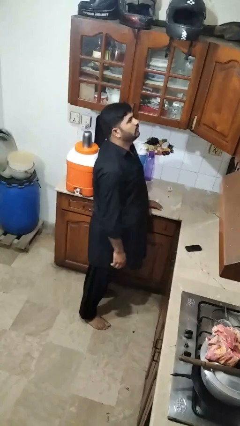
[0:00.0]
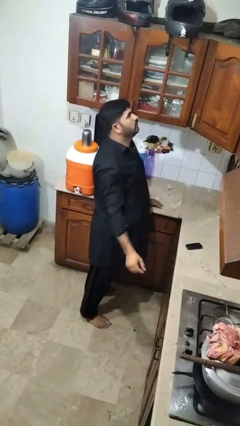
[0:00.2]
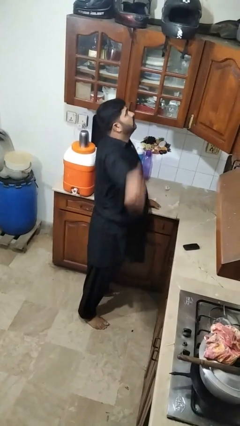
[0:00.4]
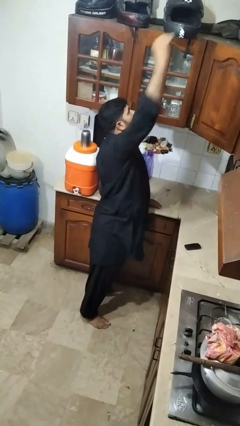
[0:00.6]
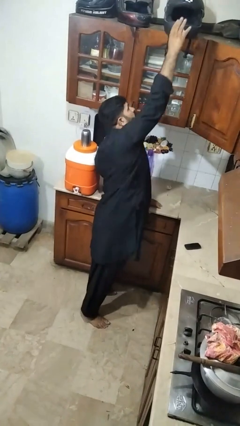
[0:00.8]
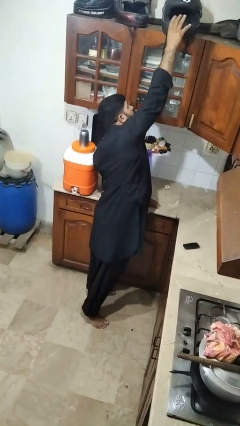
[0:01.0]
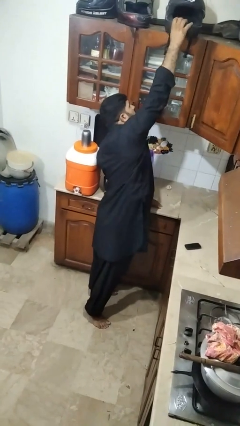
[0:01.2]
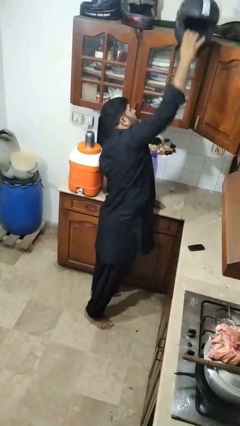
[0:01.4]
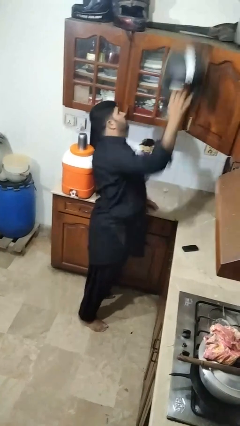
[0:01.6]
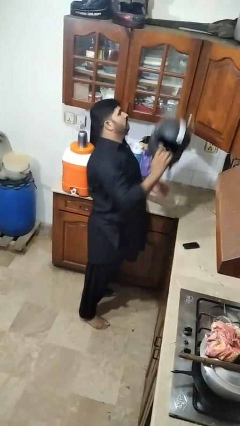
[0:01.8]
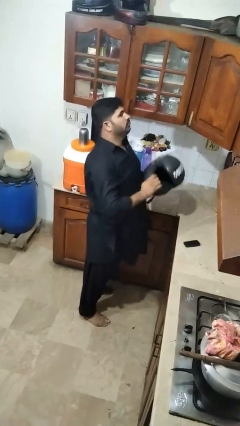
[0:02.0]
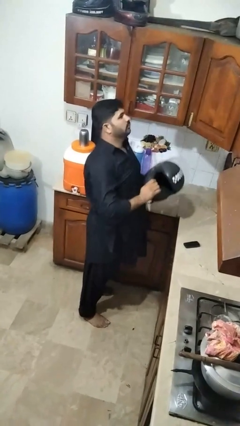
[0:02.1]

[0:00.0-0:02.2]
person picks up object from shelf

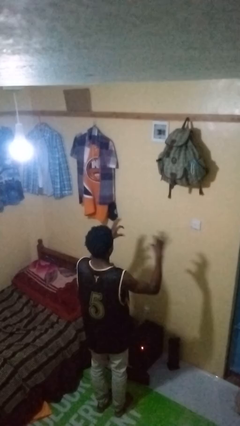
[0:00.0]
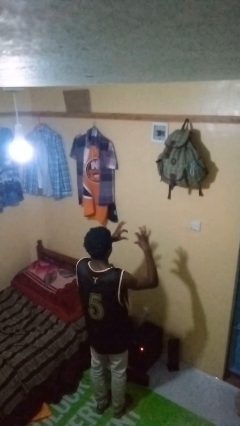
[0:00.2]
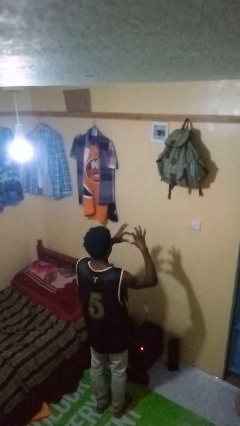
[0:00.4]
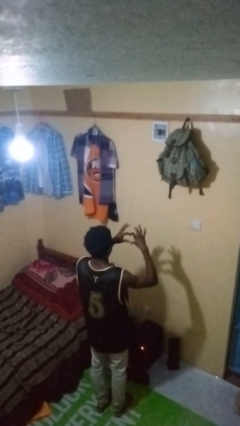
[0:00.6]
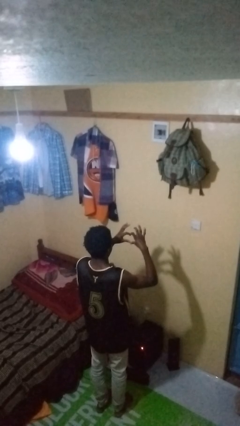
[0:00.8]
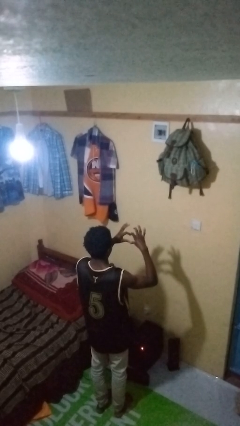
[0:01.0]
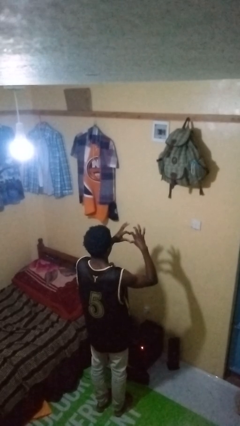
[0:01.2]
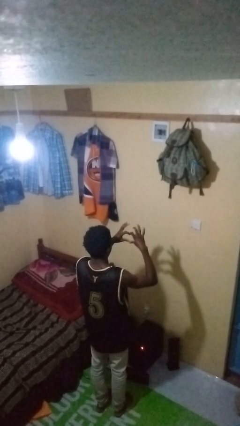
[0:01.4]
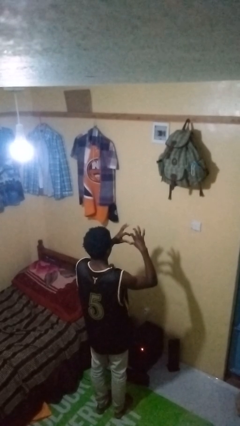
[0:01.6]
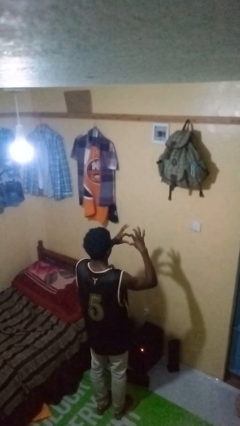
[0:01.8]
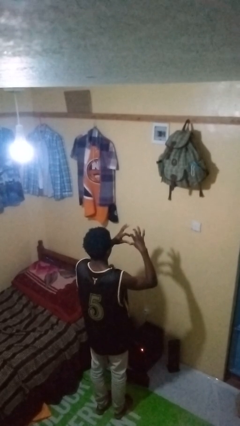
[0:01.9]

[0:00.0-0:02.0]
person gestures heart

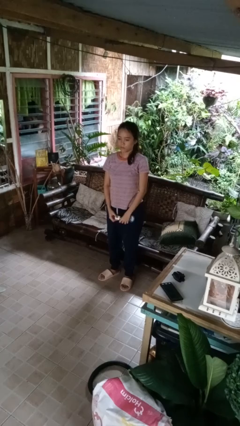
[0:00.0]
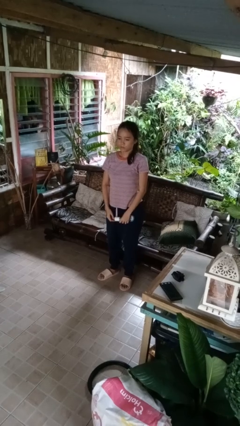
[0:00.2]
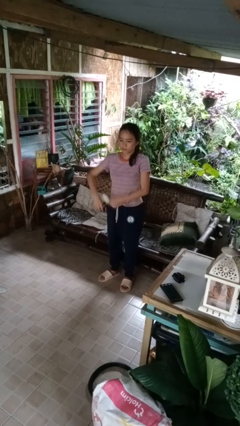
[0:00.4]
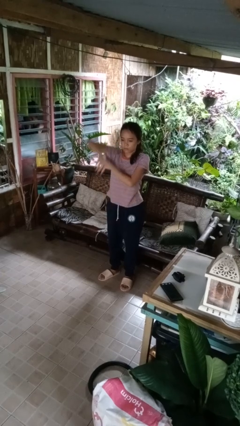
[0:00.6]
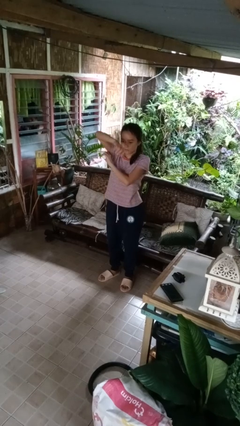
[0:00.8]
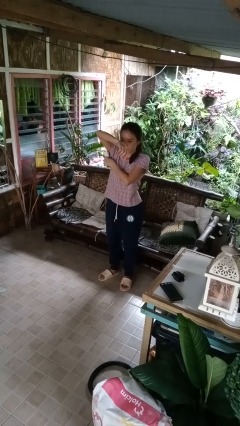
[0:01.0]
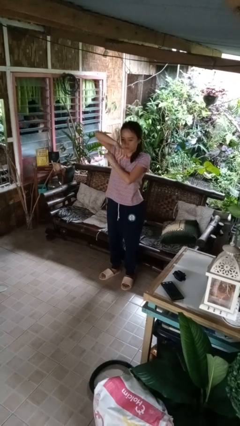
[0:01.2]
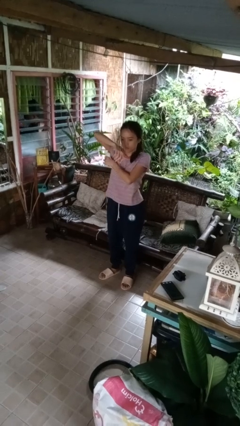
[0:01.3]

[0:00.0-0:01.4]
person applies deodorant

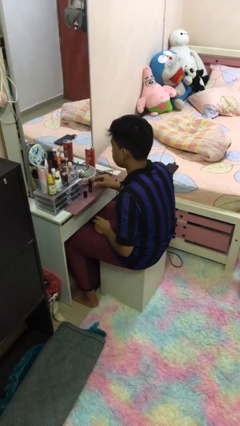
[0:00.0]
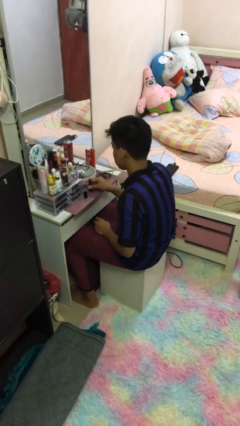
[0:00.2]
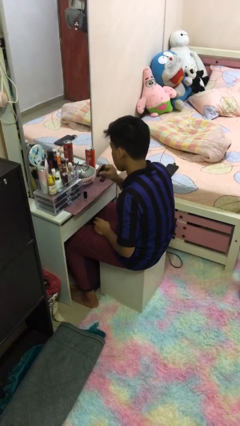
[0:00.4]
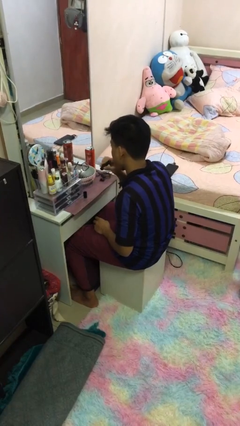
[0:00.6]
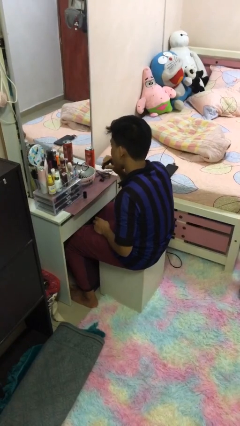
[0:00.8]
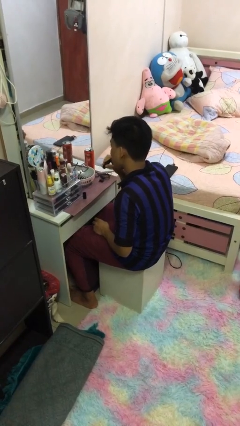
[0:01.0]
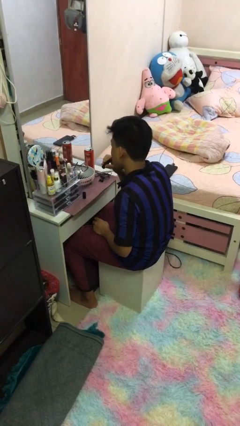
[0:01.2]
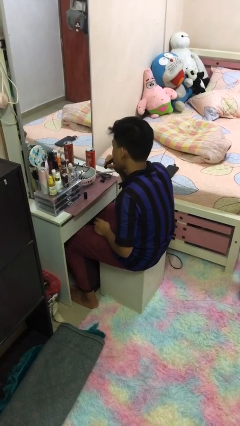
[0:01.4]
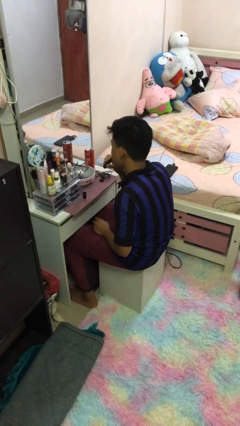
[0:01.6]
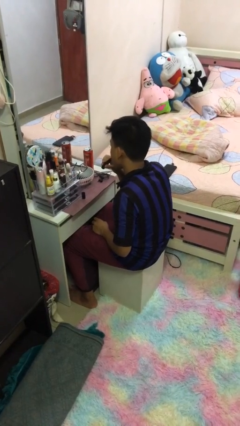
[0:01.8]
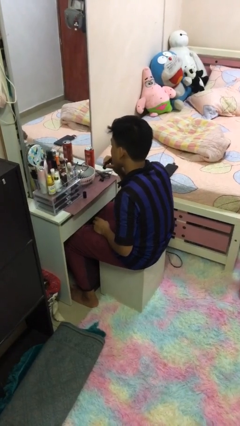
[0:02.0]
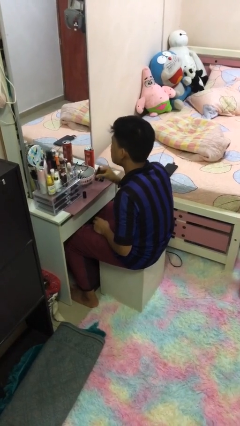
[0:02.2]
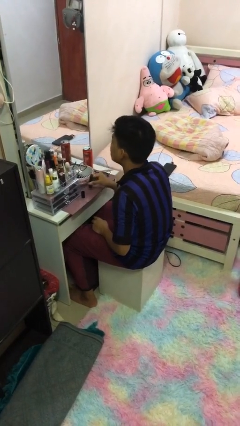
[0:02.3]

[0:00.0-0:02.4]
person applies lip makeup

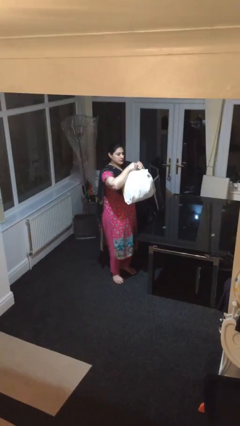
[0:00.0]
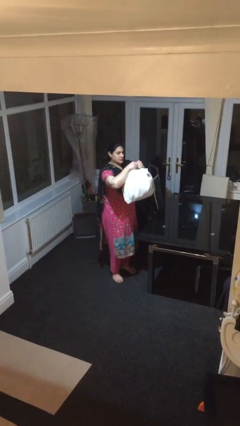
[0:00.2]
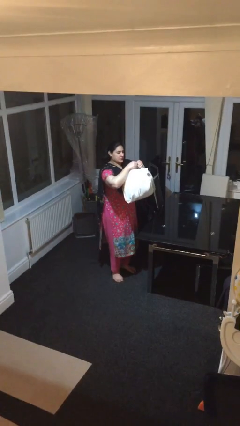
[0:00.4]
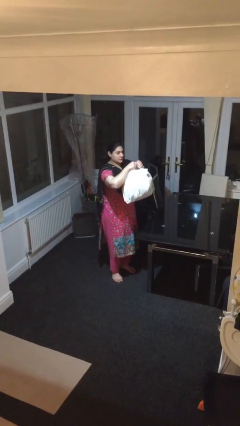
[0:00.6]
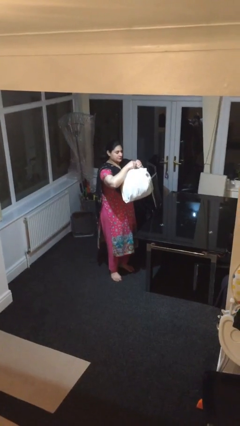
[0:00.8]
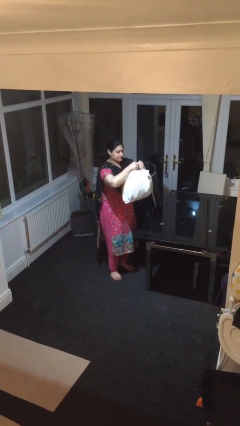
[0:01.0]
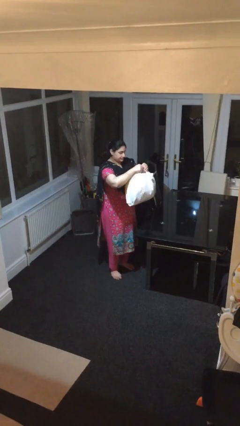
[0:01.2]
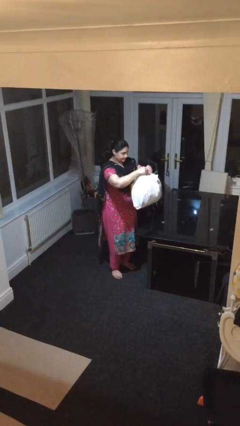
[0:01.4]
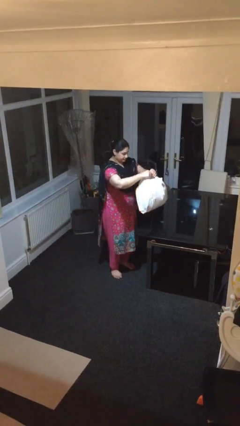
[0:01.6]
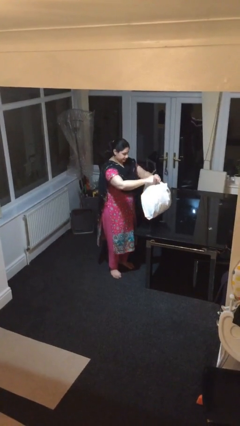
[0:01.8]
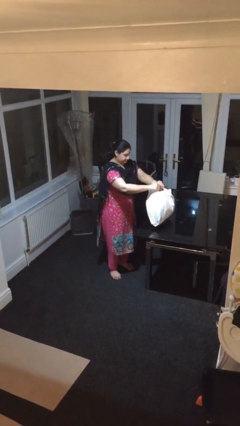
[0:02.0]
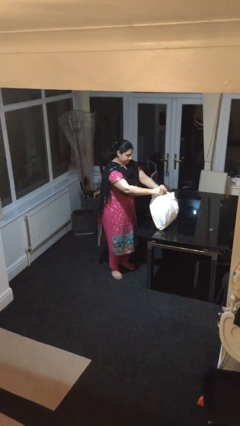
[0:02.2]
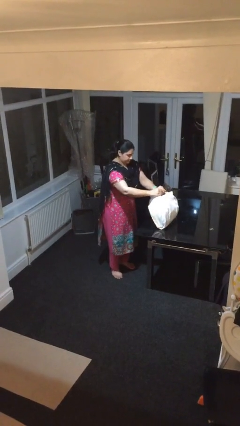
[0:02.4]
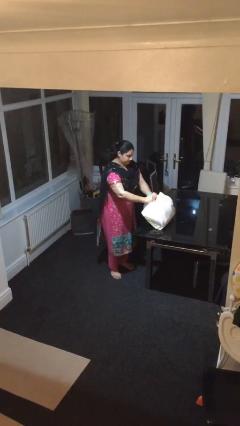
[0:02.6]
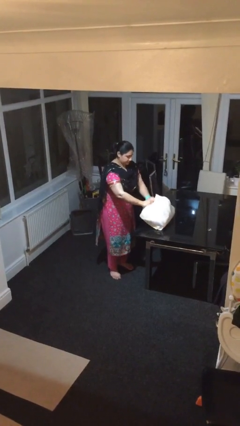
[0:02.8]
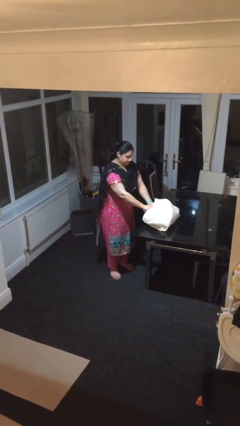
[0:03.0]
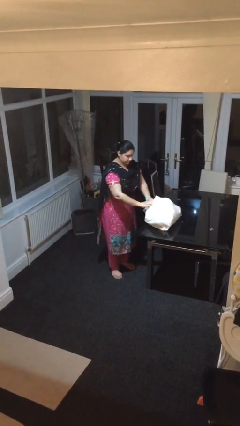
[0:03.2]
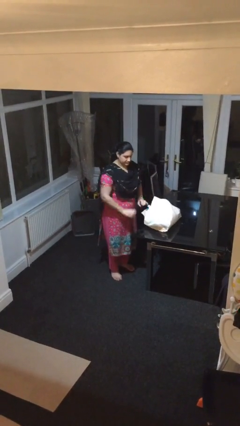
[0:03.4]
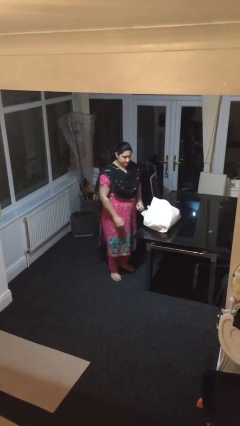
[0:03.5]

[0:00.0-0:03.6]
person puts down object on table

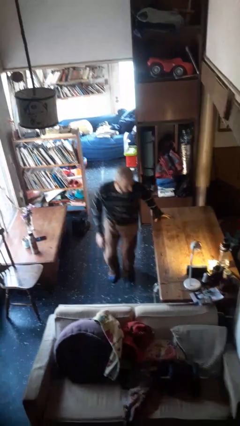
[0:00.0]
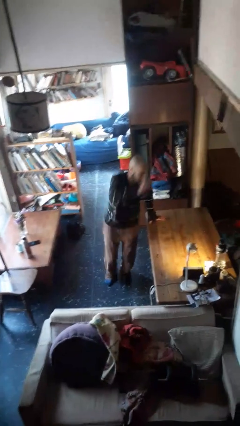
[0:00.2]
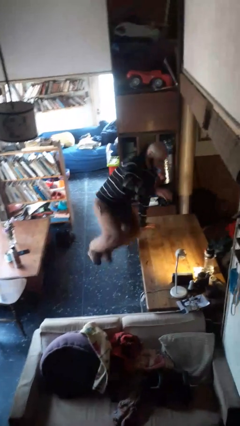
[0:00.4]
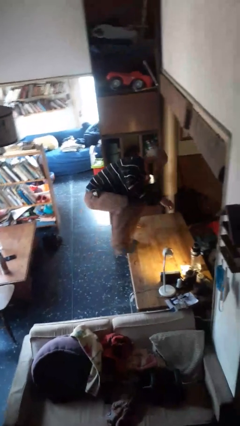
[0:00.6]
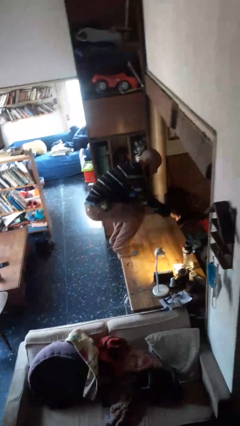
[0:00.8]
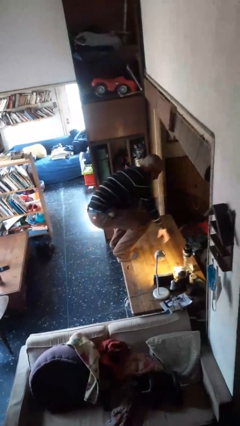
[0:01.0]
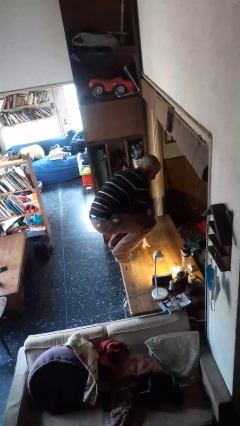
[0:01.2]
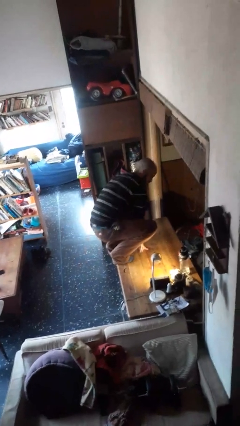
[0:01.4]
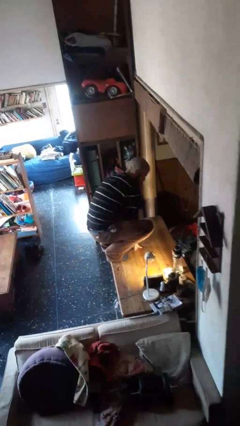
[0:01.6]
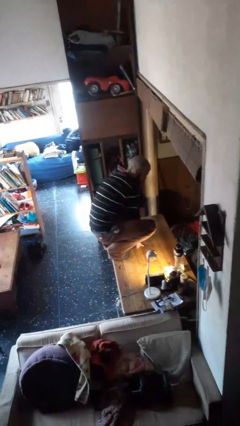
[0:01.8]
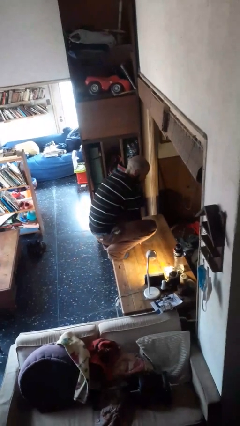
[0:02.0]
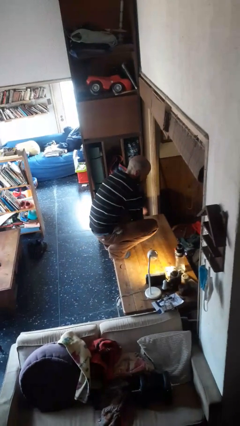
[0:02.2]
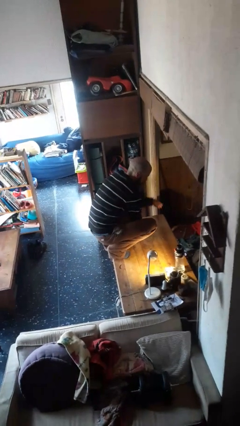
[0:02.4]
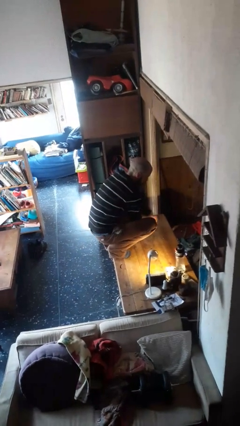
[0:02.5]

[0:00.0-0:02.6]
person climbs on table

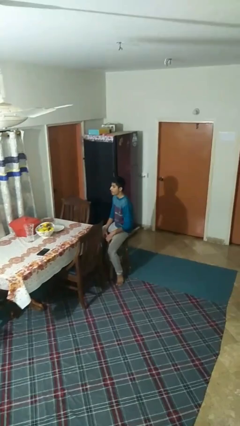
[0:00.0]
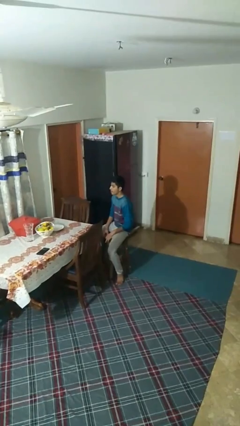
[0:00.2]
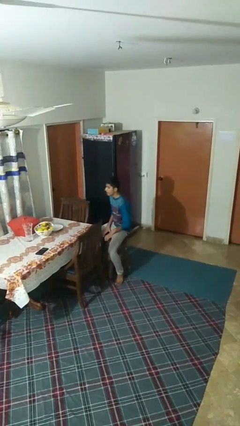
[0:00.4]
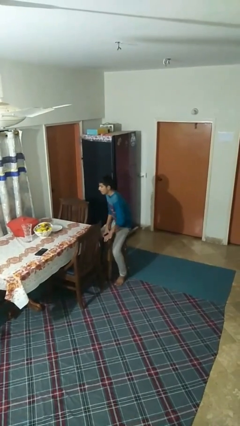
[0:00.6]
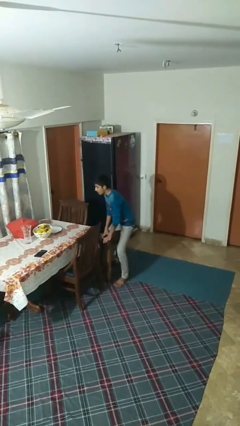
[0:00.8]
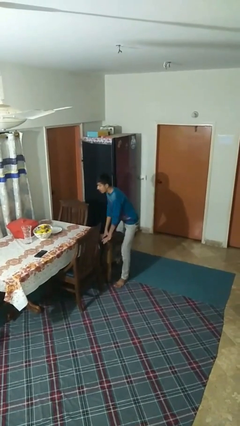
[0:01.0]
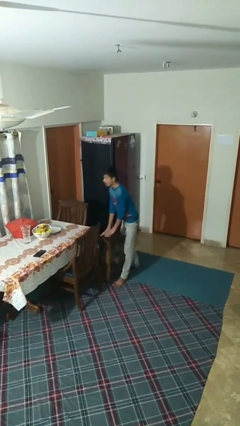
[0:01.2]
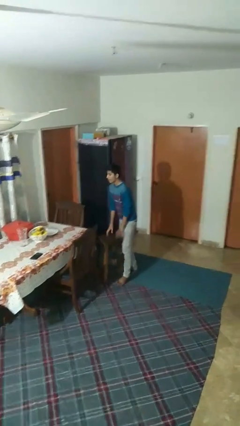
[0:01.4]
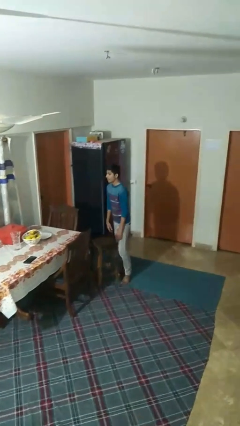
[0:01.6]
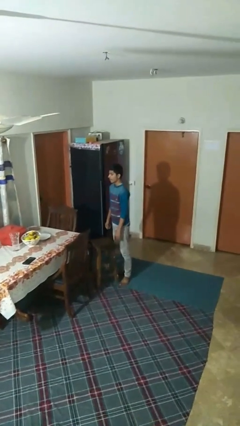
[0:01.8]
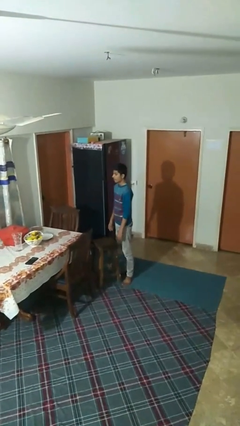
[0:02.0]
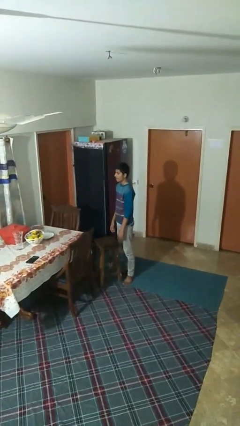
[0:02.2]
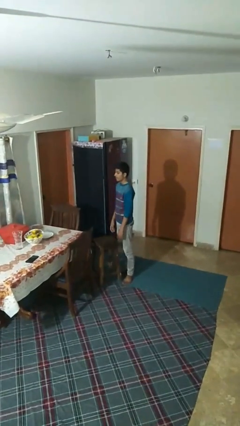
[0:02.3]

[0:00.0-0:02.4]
person stands up
